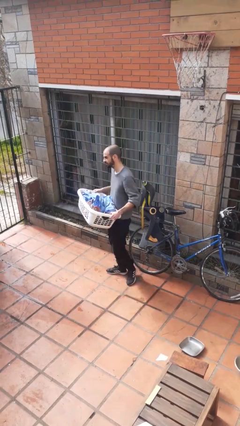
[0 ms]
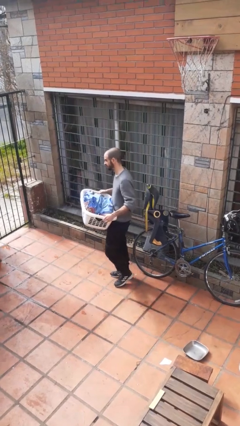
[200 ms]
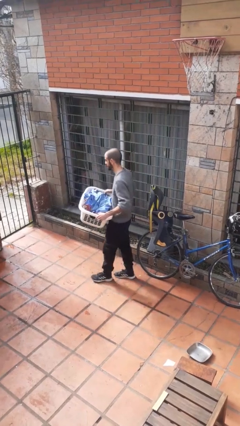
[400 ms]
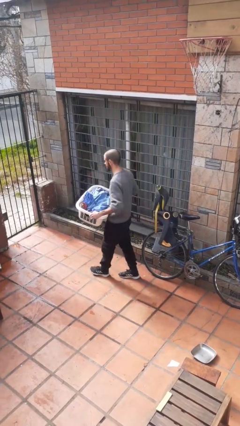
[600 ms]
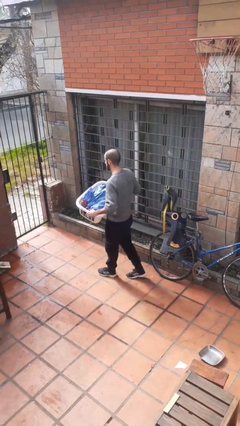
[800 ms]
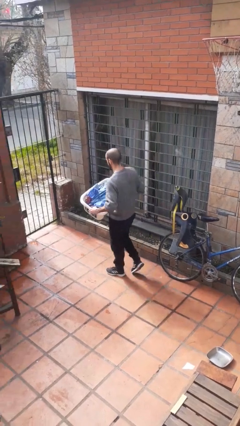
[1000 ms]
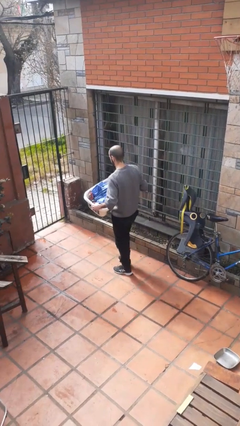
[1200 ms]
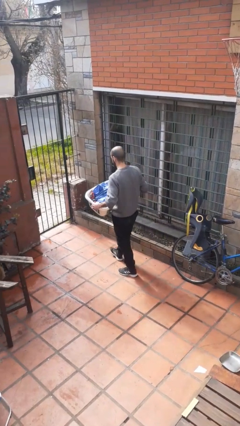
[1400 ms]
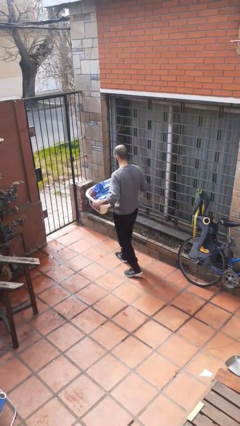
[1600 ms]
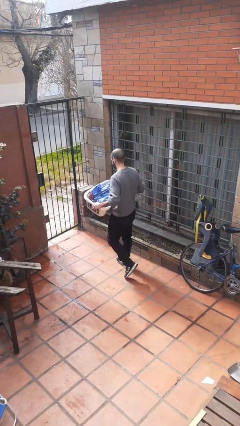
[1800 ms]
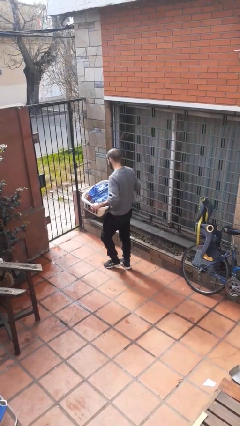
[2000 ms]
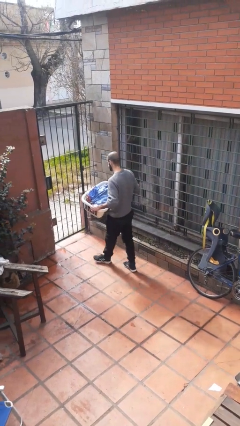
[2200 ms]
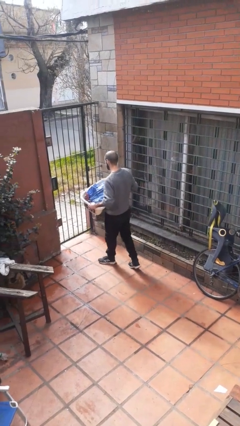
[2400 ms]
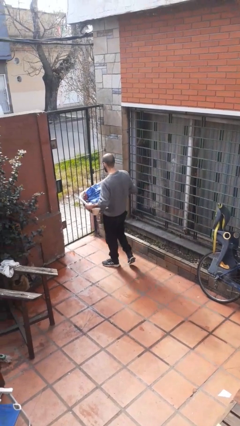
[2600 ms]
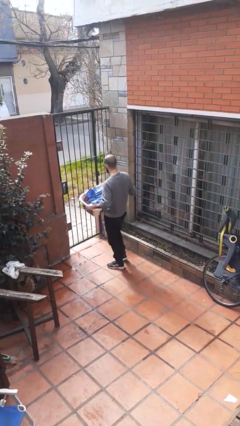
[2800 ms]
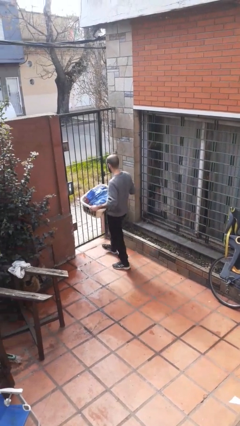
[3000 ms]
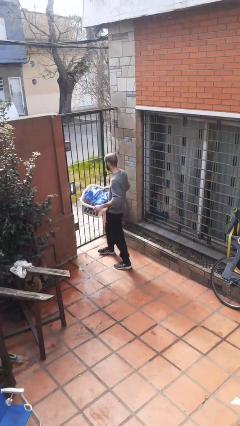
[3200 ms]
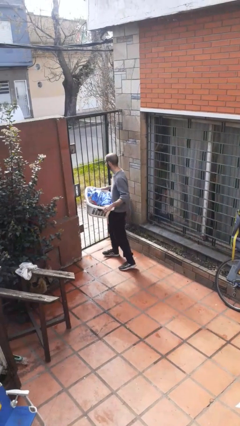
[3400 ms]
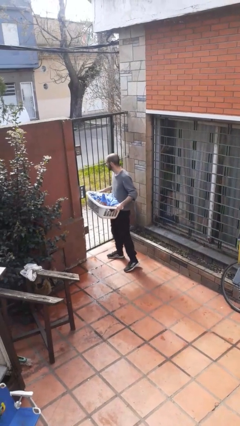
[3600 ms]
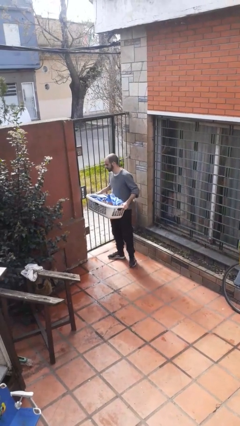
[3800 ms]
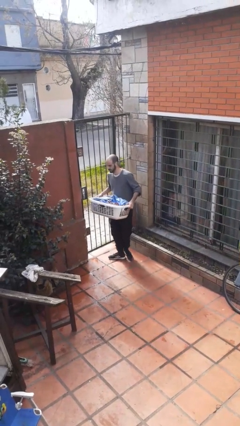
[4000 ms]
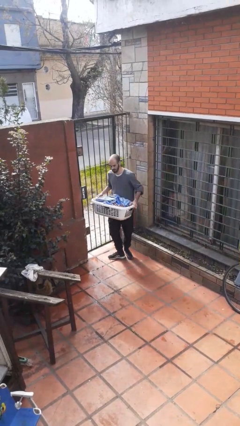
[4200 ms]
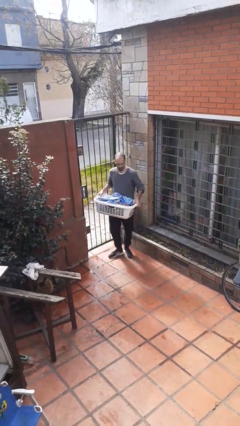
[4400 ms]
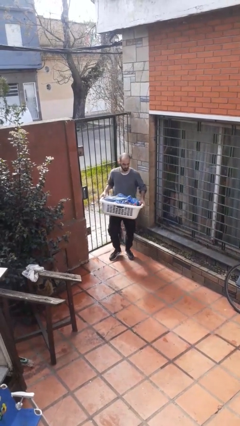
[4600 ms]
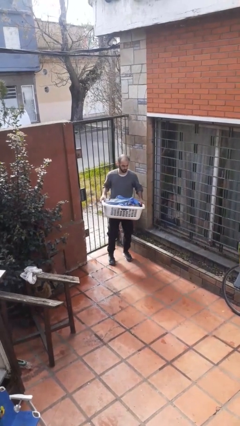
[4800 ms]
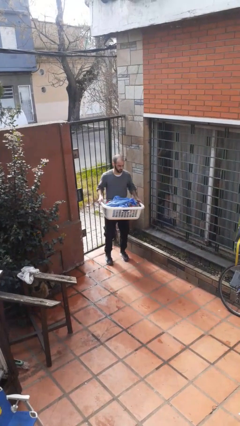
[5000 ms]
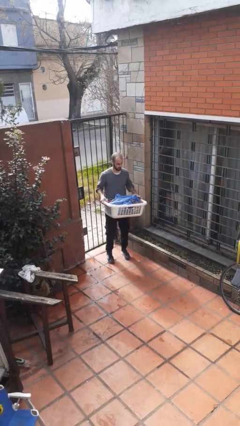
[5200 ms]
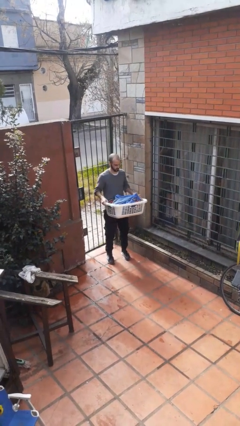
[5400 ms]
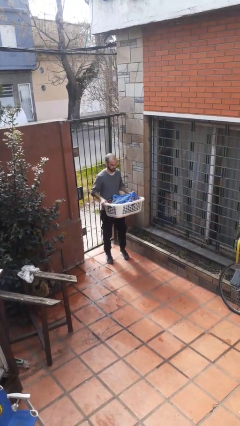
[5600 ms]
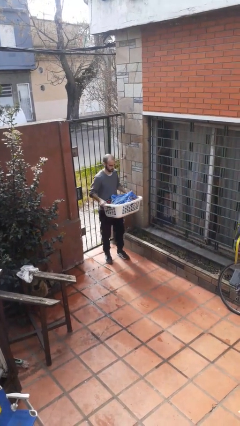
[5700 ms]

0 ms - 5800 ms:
person carries laundry basket

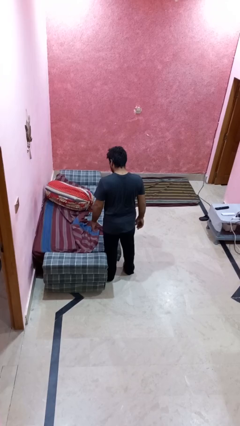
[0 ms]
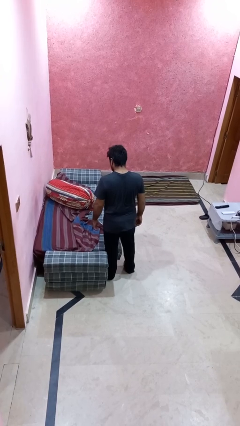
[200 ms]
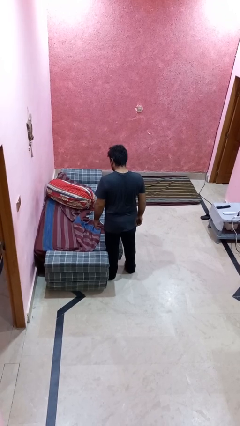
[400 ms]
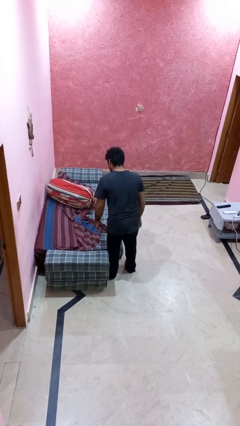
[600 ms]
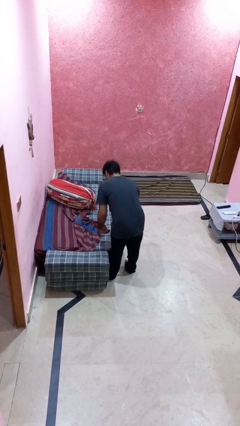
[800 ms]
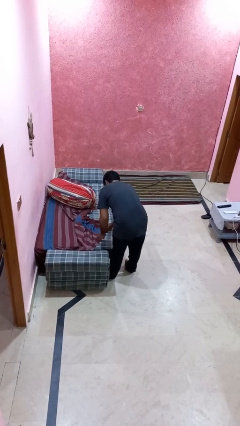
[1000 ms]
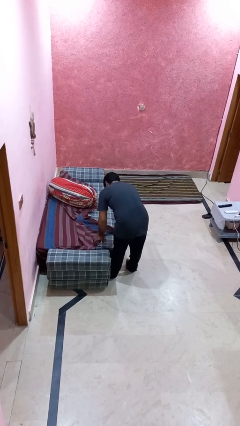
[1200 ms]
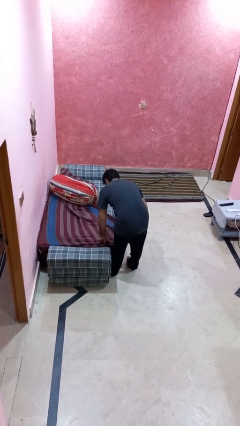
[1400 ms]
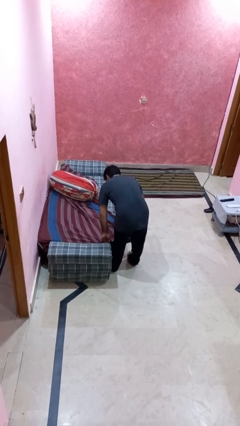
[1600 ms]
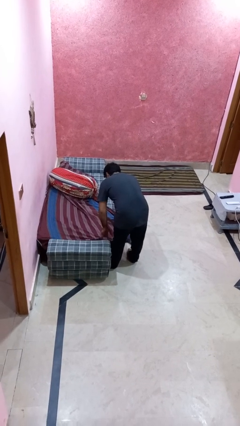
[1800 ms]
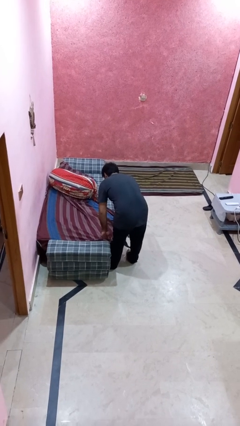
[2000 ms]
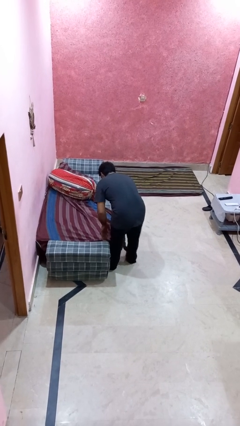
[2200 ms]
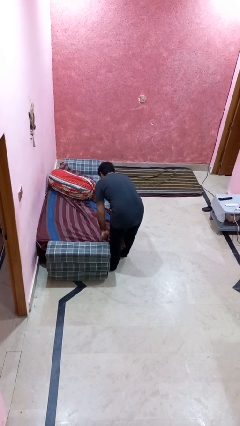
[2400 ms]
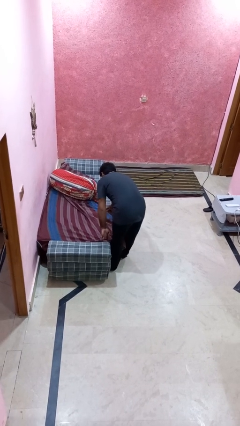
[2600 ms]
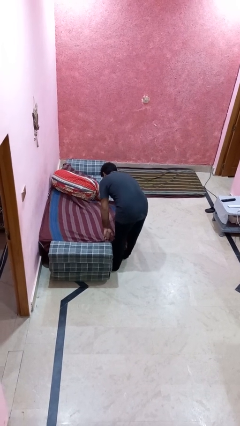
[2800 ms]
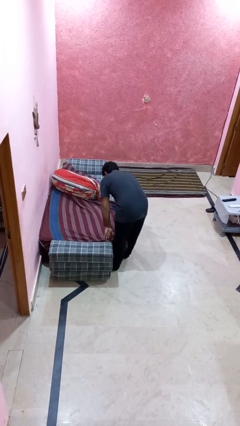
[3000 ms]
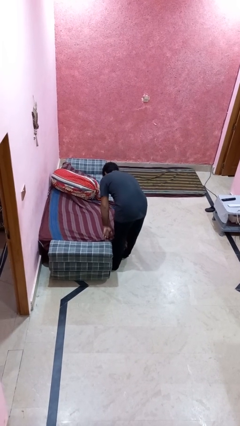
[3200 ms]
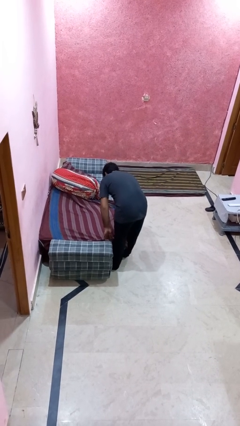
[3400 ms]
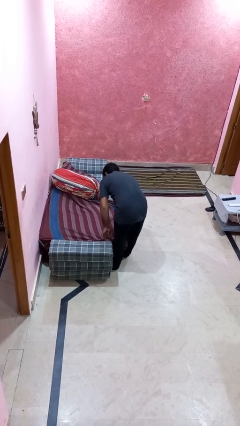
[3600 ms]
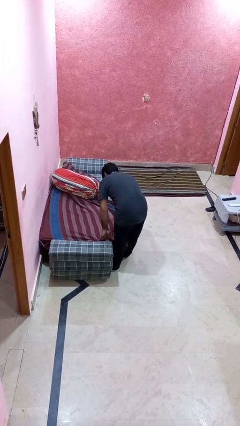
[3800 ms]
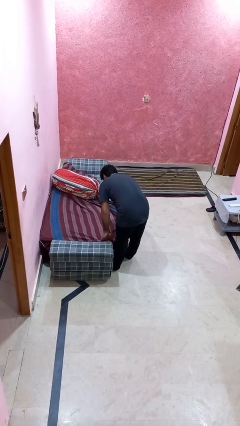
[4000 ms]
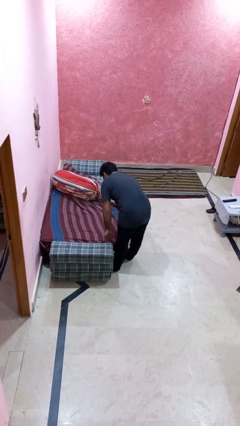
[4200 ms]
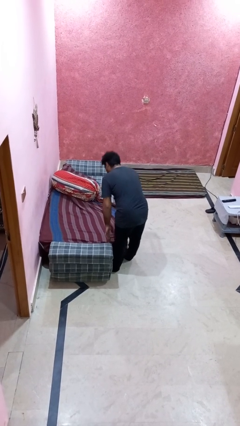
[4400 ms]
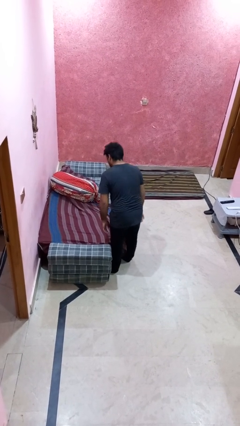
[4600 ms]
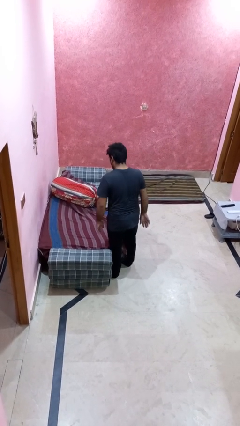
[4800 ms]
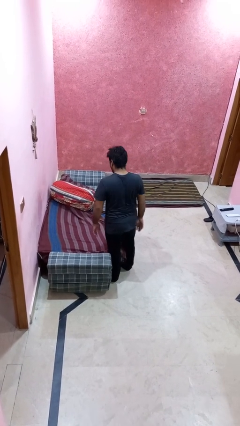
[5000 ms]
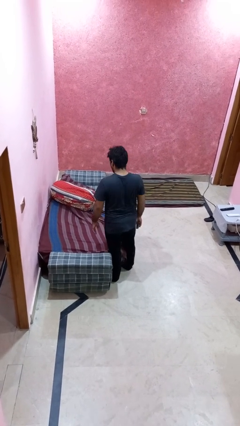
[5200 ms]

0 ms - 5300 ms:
person makes bed

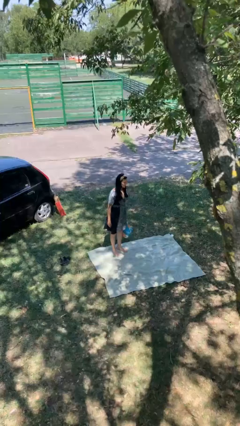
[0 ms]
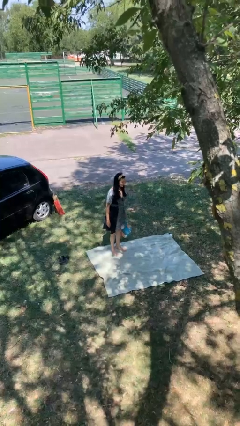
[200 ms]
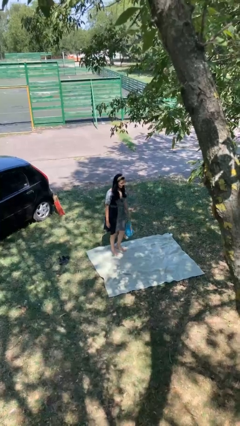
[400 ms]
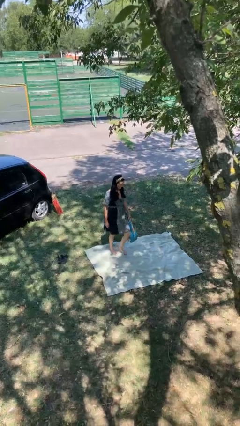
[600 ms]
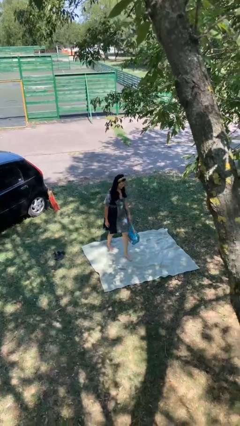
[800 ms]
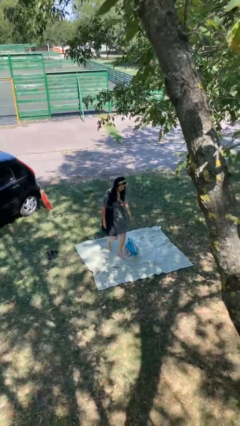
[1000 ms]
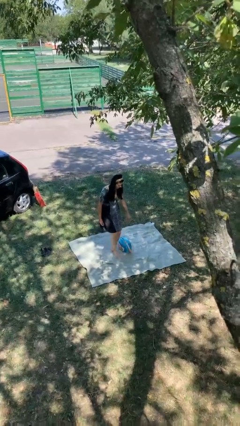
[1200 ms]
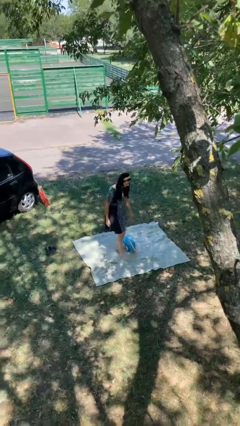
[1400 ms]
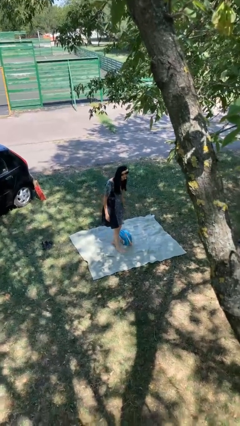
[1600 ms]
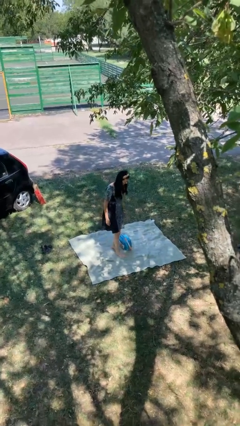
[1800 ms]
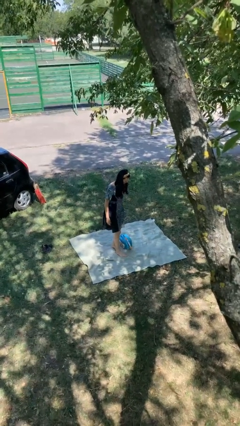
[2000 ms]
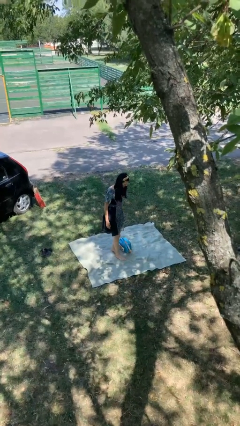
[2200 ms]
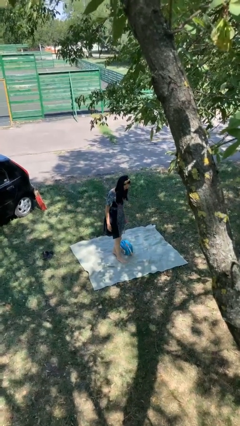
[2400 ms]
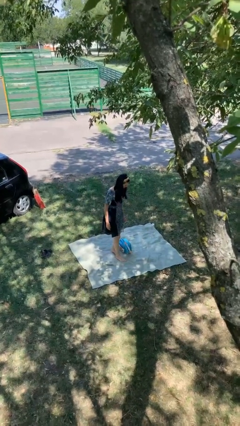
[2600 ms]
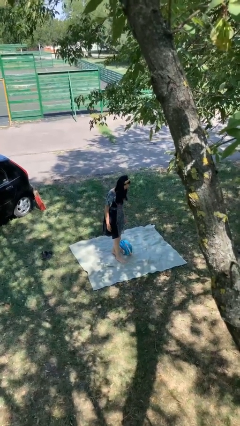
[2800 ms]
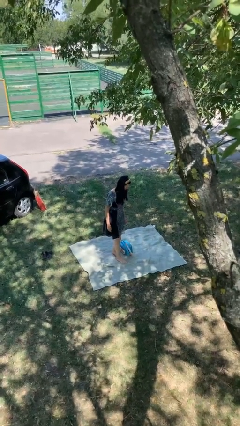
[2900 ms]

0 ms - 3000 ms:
person drops object

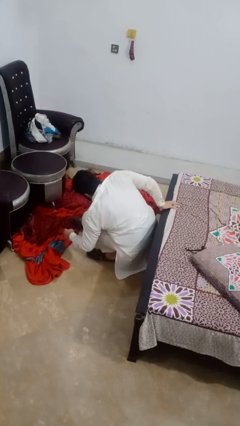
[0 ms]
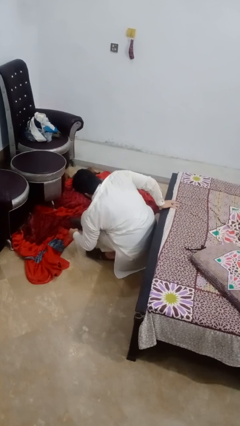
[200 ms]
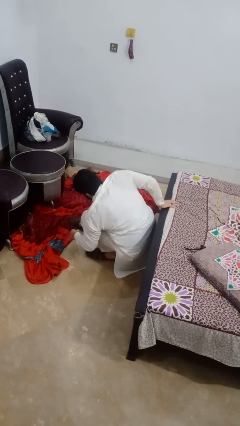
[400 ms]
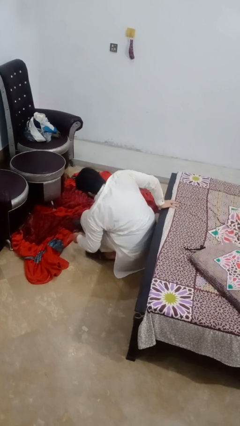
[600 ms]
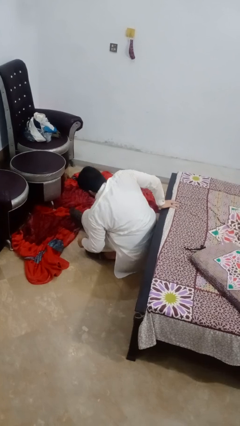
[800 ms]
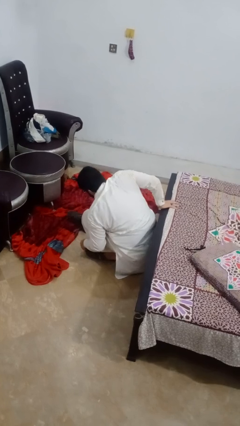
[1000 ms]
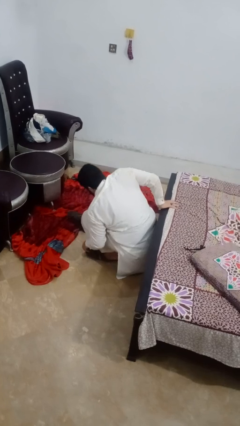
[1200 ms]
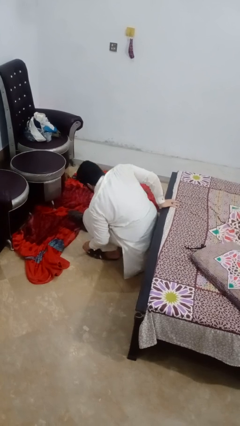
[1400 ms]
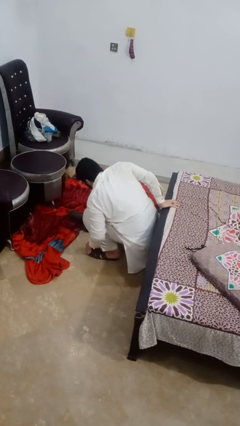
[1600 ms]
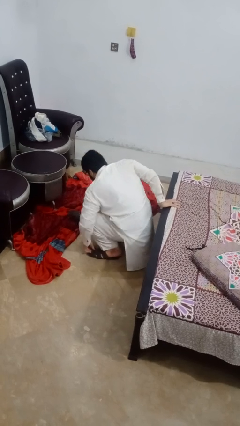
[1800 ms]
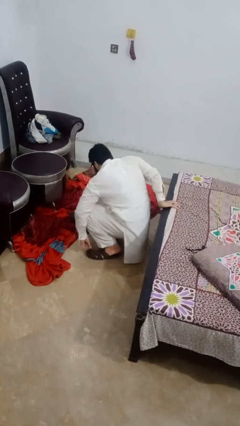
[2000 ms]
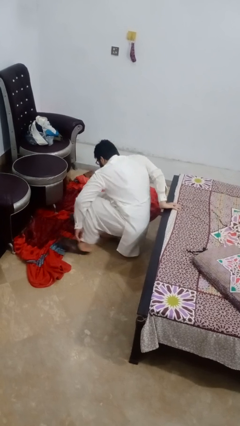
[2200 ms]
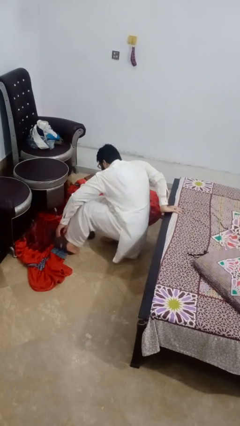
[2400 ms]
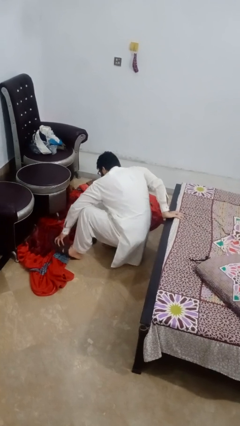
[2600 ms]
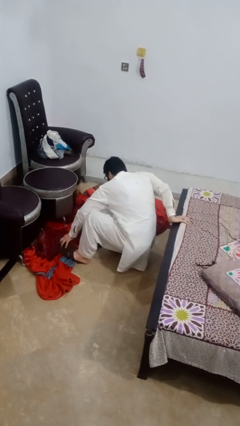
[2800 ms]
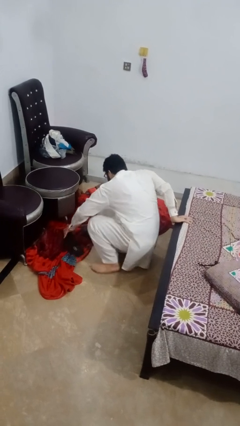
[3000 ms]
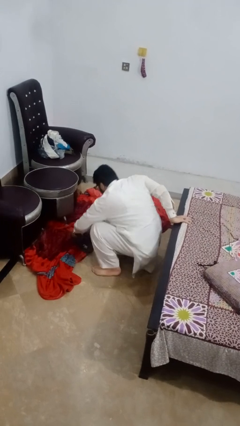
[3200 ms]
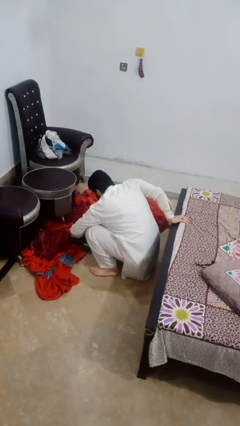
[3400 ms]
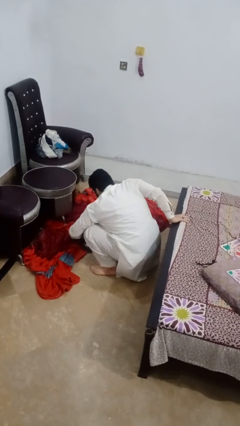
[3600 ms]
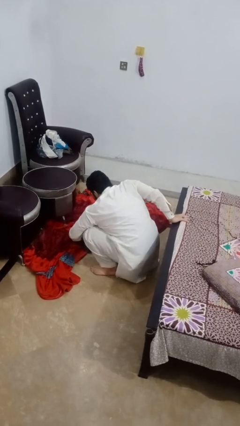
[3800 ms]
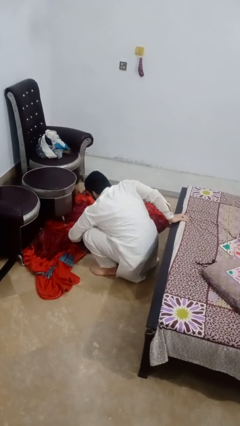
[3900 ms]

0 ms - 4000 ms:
person takes off shoes
